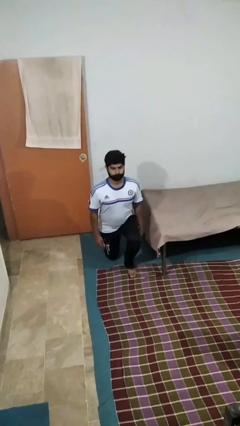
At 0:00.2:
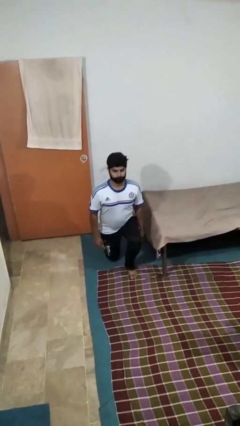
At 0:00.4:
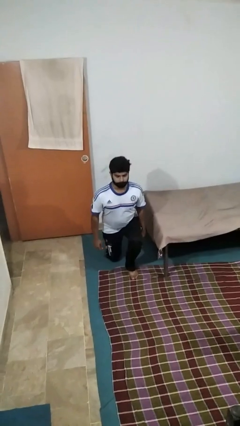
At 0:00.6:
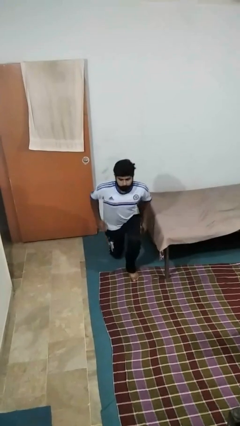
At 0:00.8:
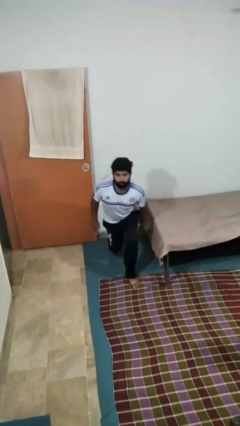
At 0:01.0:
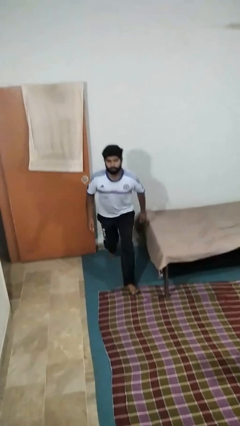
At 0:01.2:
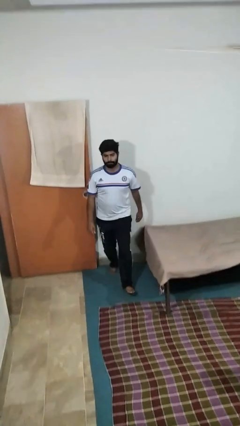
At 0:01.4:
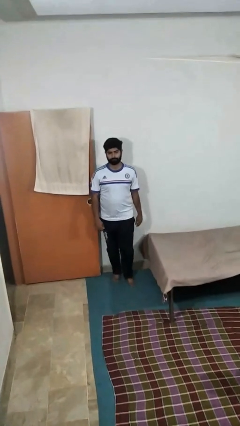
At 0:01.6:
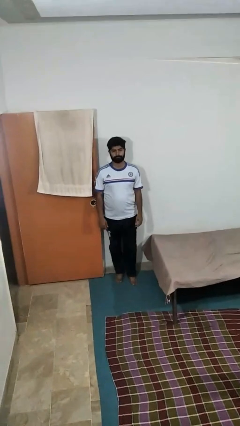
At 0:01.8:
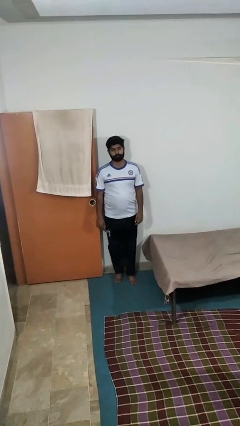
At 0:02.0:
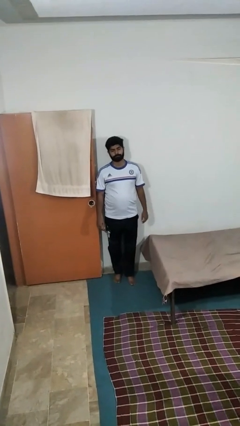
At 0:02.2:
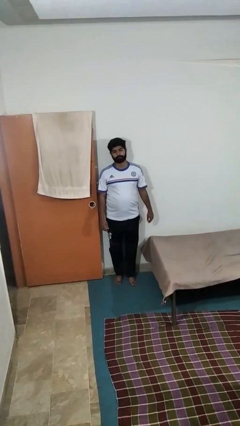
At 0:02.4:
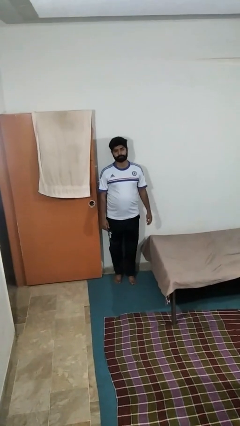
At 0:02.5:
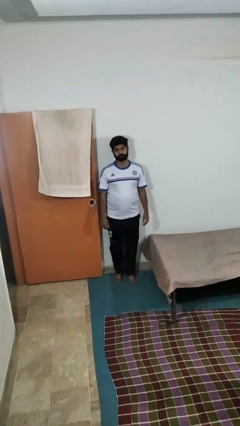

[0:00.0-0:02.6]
person stands up from floor

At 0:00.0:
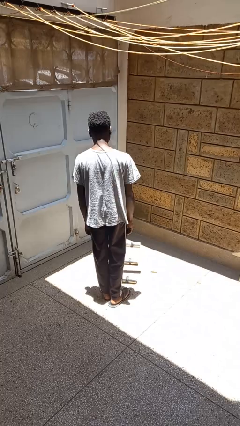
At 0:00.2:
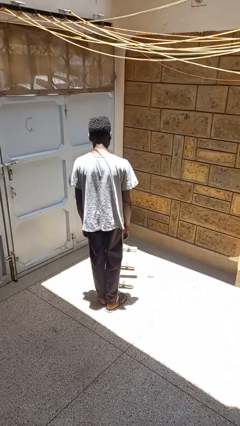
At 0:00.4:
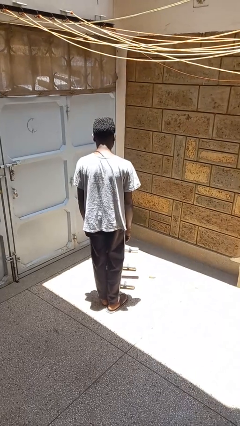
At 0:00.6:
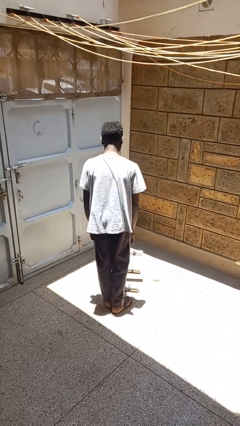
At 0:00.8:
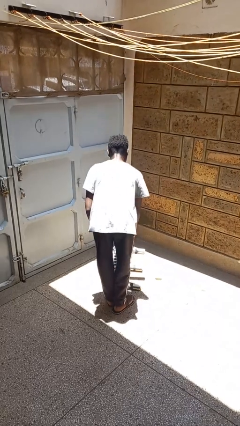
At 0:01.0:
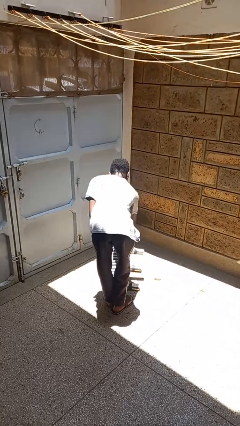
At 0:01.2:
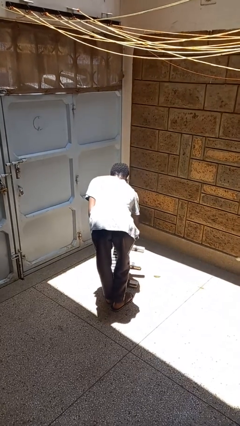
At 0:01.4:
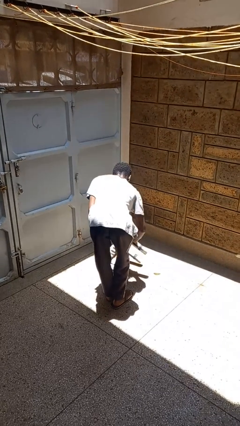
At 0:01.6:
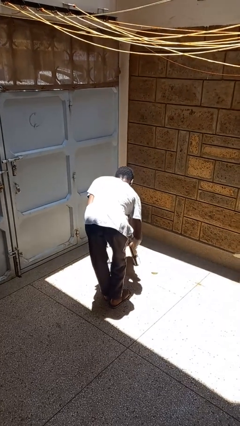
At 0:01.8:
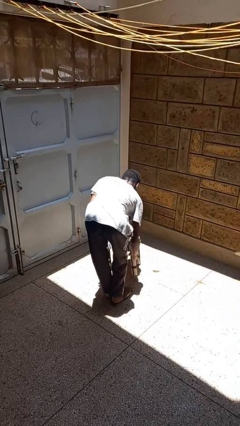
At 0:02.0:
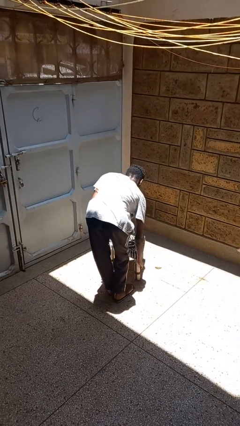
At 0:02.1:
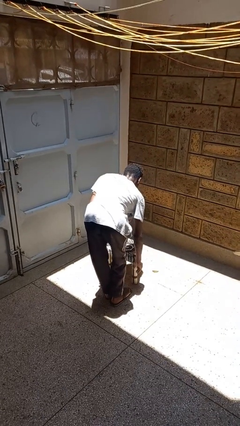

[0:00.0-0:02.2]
person sets upright furniture

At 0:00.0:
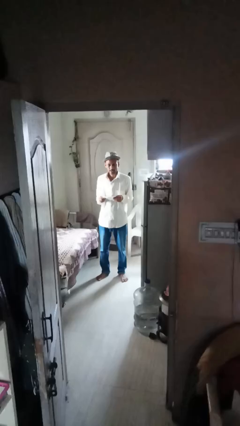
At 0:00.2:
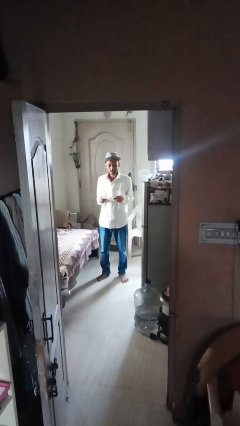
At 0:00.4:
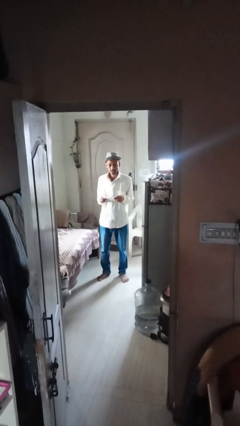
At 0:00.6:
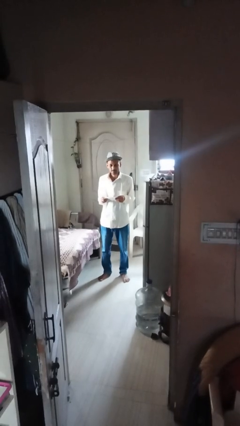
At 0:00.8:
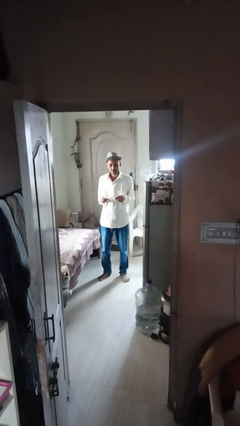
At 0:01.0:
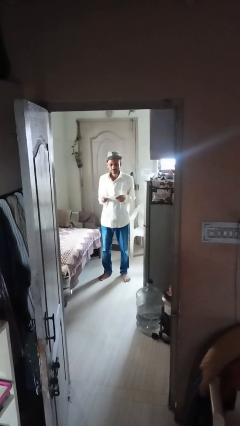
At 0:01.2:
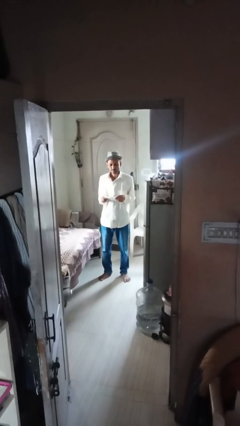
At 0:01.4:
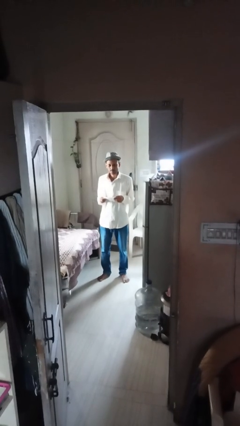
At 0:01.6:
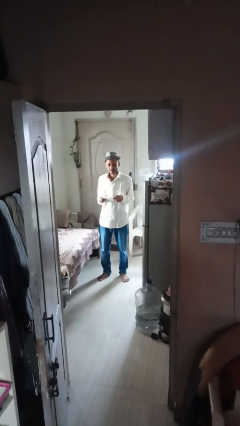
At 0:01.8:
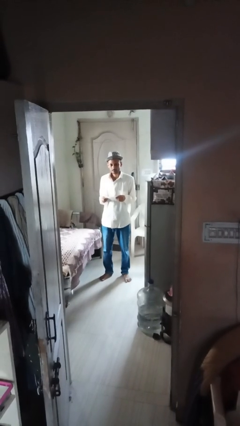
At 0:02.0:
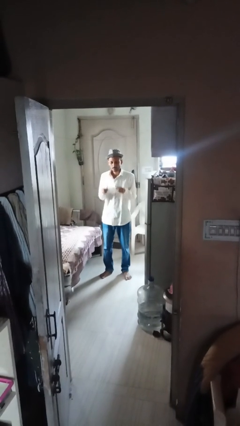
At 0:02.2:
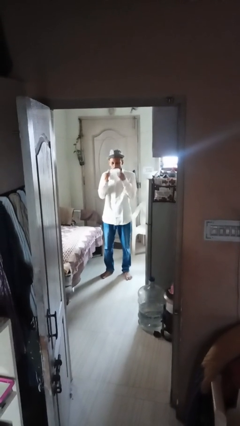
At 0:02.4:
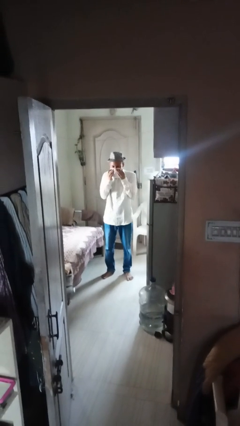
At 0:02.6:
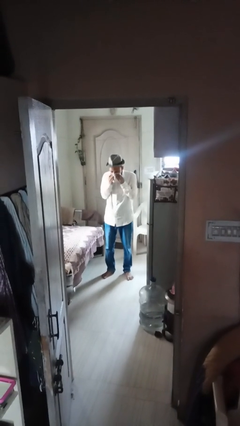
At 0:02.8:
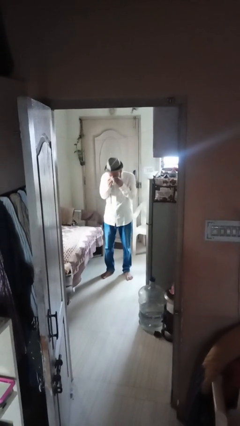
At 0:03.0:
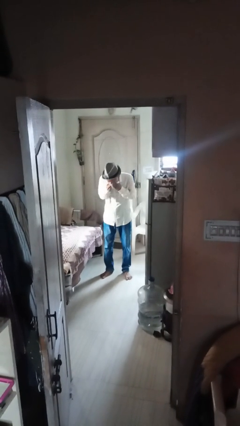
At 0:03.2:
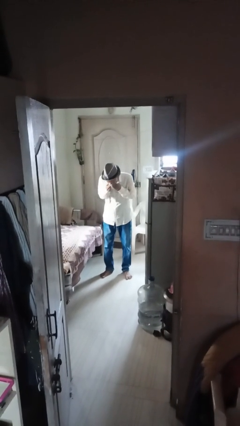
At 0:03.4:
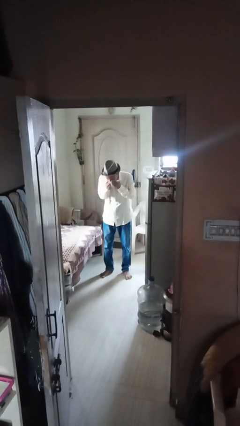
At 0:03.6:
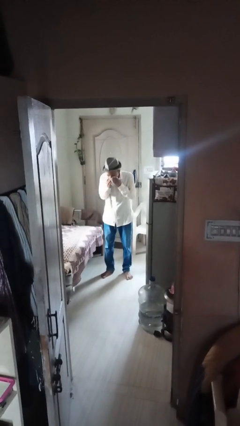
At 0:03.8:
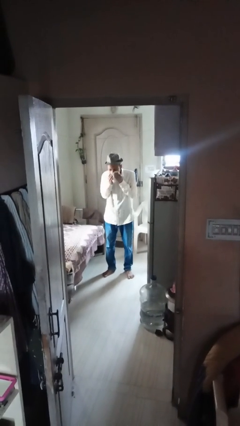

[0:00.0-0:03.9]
person blows nose

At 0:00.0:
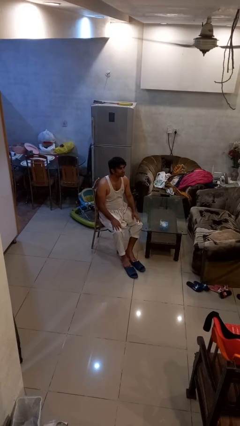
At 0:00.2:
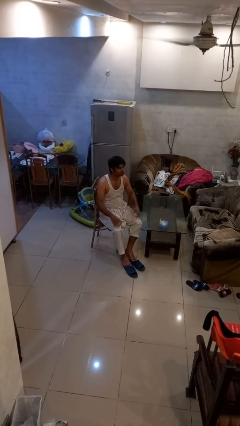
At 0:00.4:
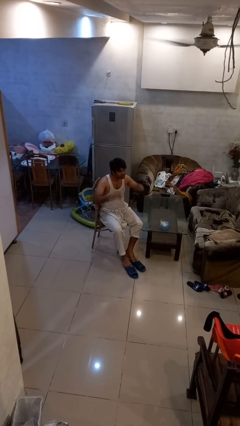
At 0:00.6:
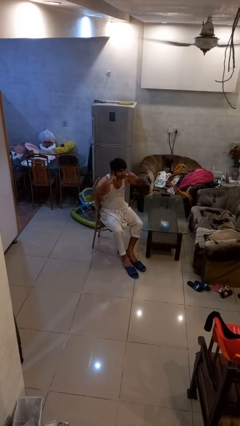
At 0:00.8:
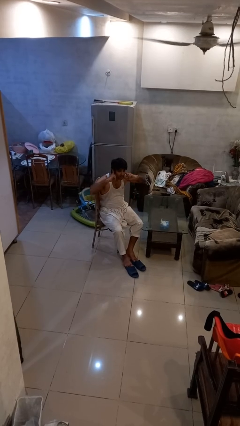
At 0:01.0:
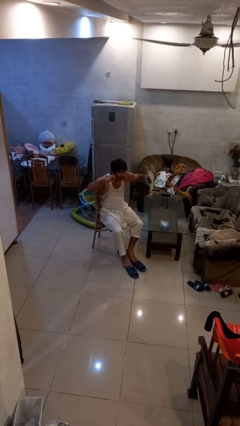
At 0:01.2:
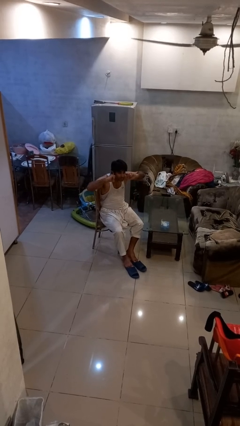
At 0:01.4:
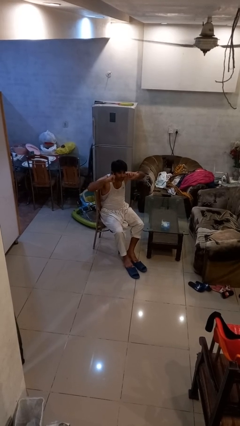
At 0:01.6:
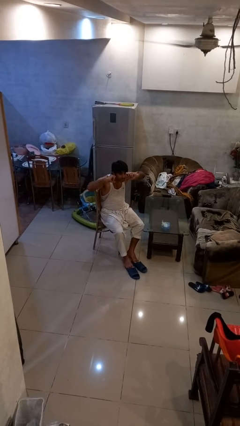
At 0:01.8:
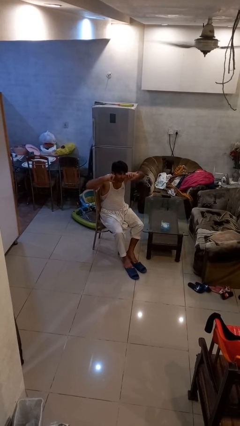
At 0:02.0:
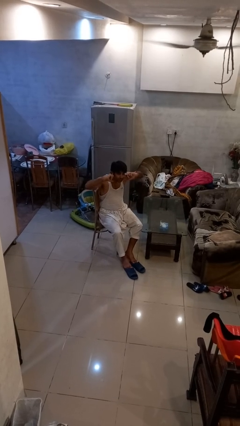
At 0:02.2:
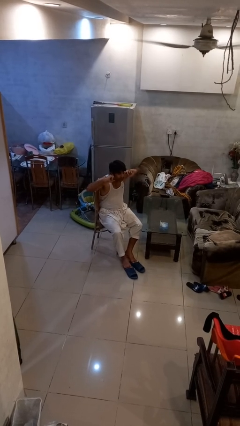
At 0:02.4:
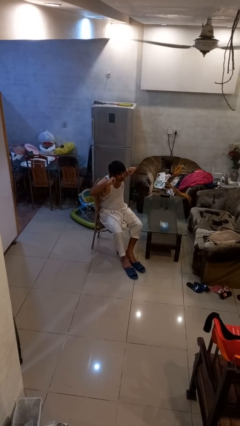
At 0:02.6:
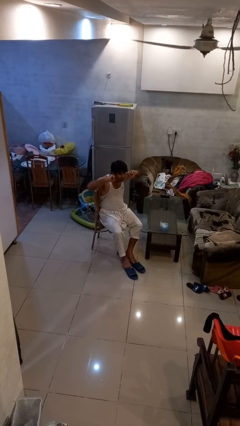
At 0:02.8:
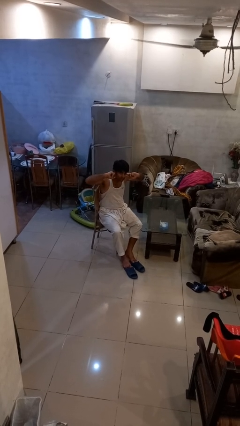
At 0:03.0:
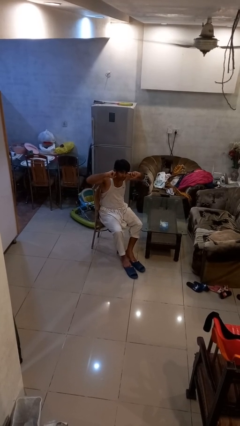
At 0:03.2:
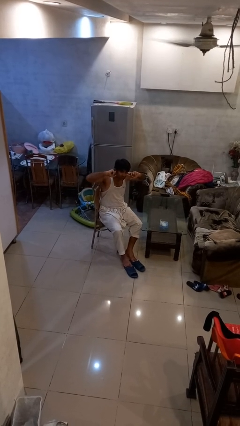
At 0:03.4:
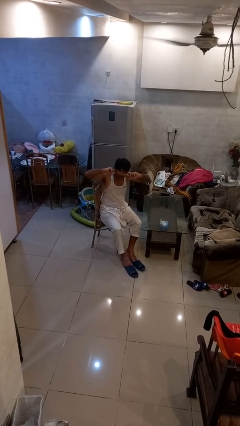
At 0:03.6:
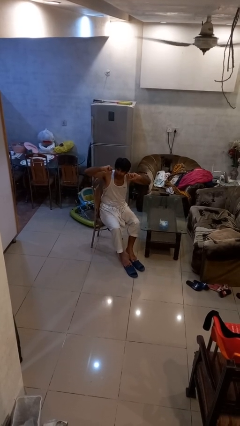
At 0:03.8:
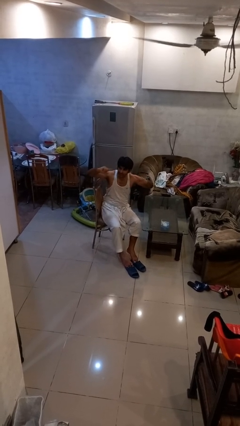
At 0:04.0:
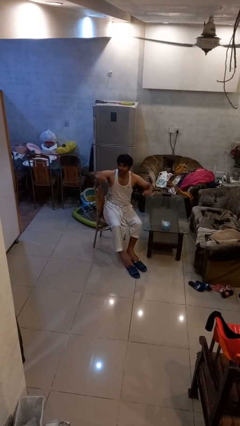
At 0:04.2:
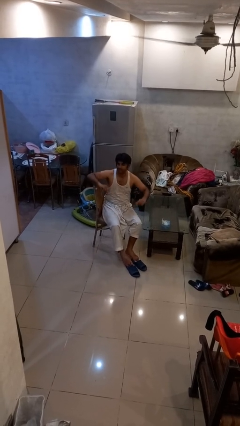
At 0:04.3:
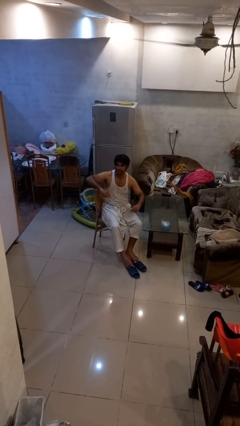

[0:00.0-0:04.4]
person puts fingers in ear

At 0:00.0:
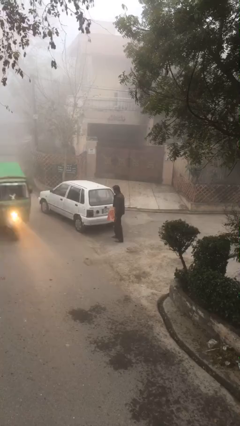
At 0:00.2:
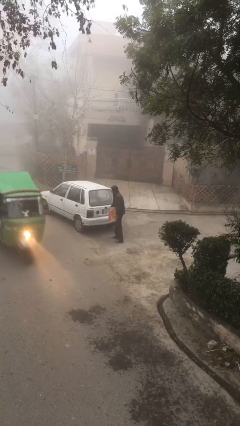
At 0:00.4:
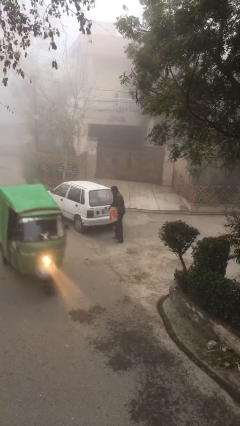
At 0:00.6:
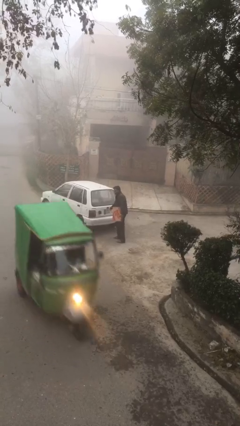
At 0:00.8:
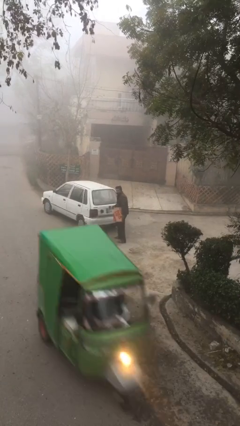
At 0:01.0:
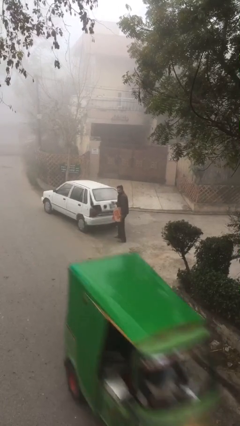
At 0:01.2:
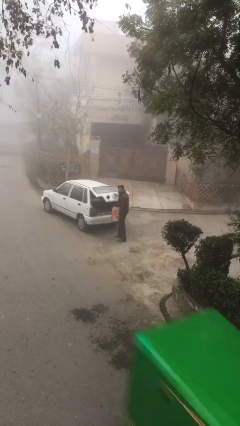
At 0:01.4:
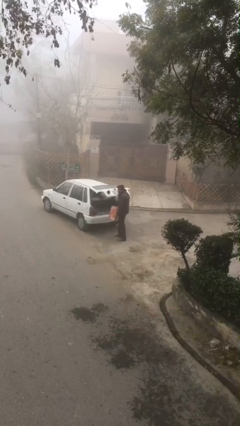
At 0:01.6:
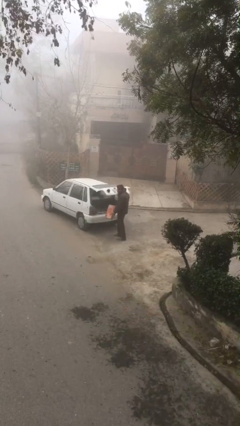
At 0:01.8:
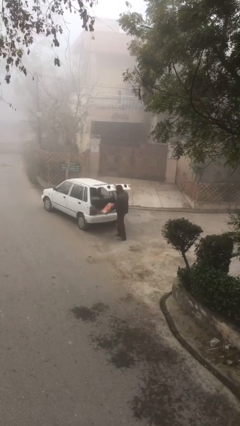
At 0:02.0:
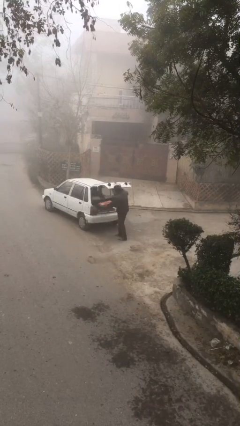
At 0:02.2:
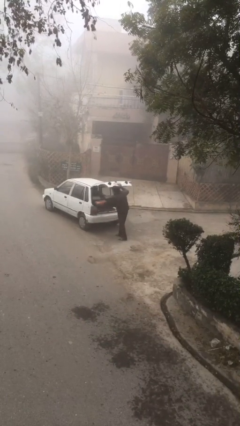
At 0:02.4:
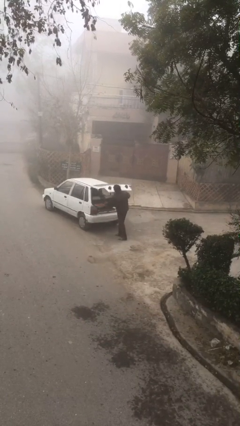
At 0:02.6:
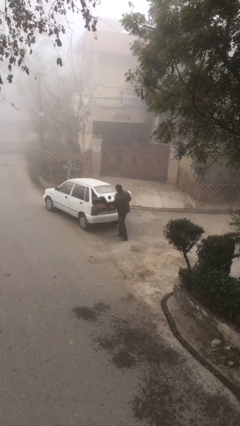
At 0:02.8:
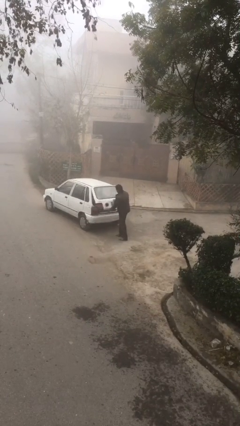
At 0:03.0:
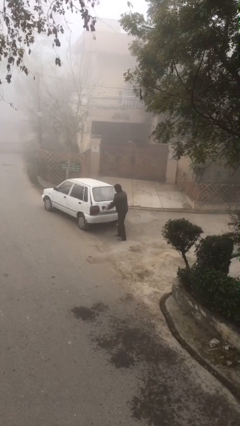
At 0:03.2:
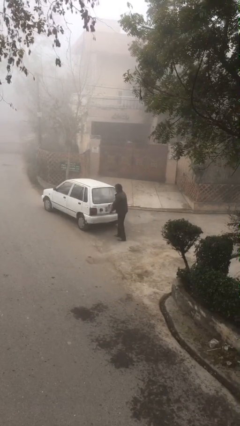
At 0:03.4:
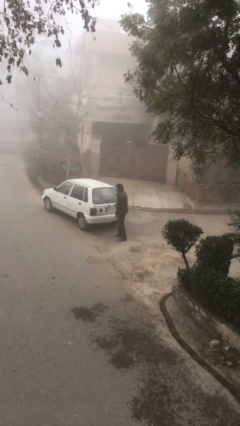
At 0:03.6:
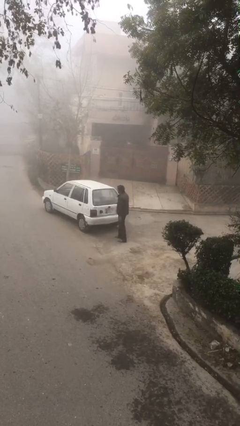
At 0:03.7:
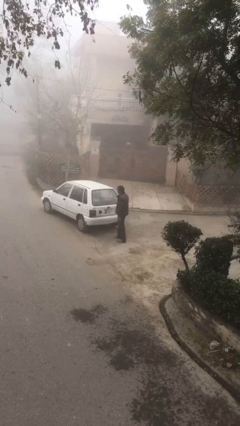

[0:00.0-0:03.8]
person loads car

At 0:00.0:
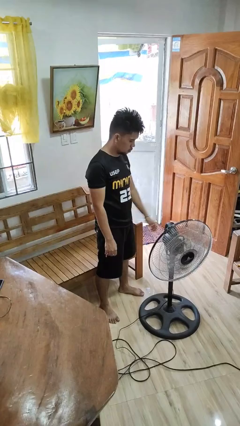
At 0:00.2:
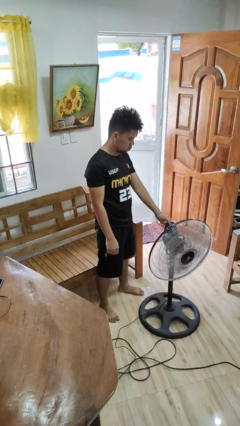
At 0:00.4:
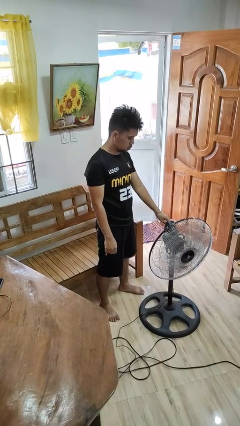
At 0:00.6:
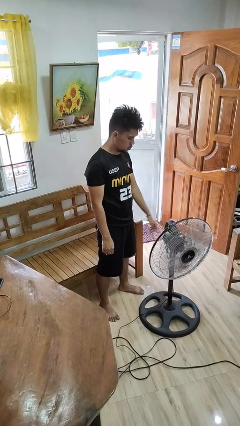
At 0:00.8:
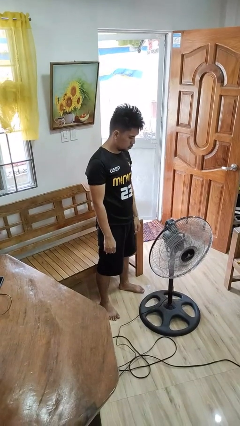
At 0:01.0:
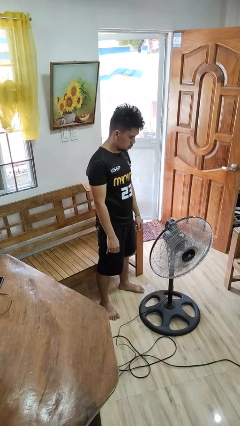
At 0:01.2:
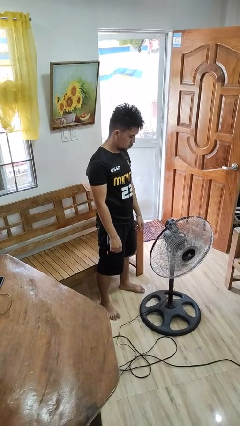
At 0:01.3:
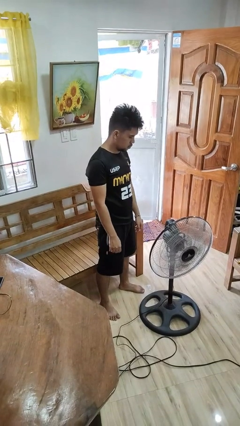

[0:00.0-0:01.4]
person turns off fan
